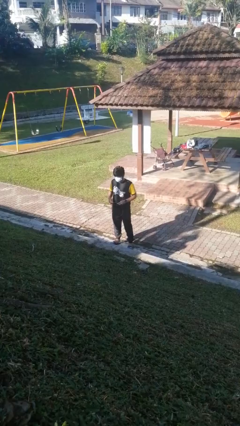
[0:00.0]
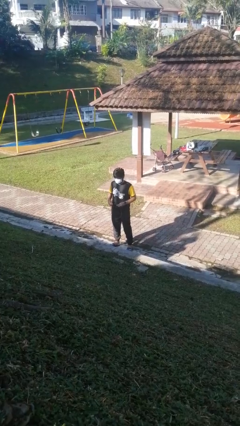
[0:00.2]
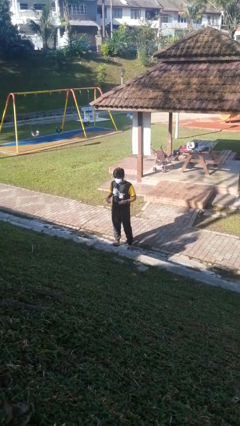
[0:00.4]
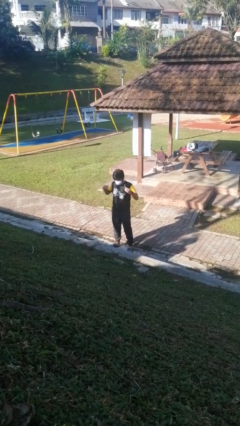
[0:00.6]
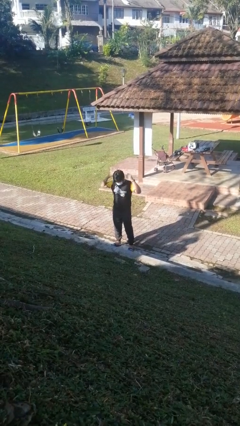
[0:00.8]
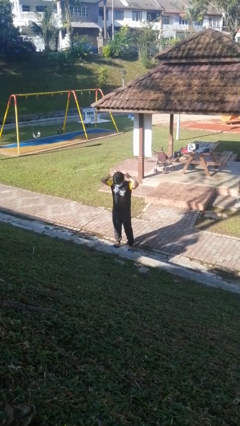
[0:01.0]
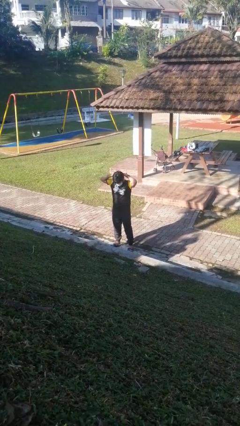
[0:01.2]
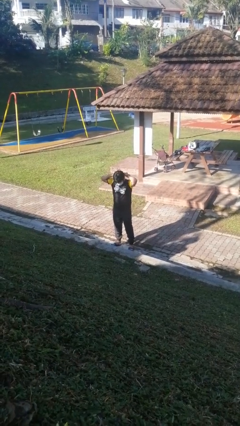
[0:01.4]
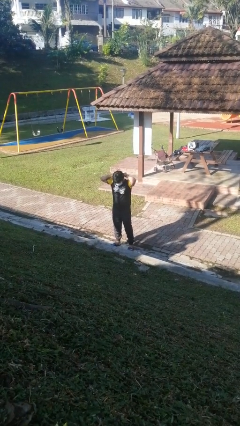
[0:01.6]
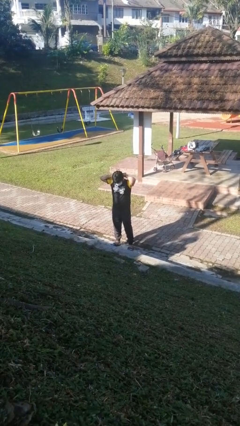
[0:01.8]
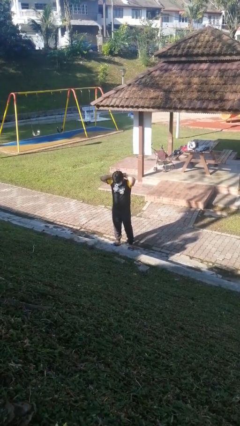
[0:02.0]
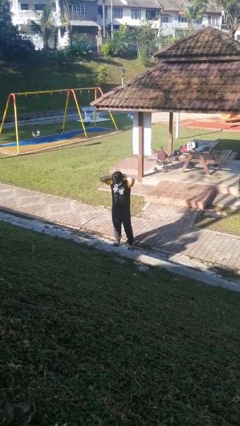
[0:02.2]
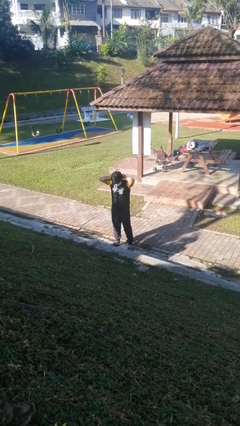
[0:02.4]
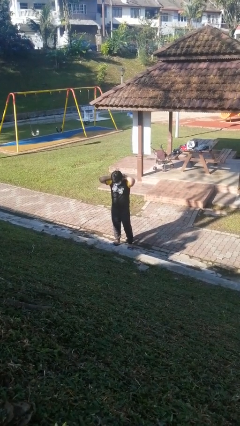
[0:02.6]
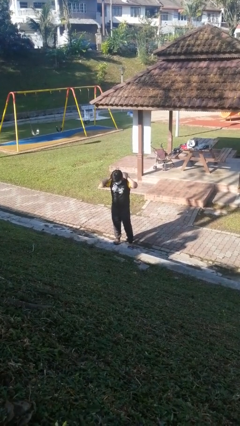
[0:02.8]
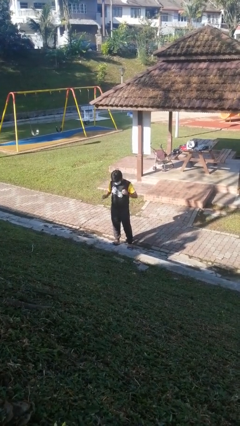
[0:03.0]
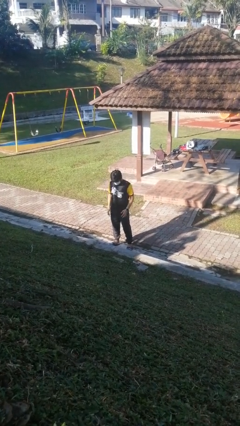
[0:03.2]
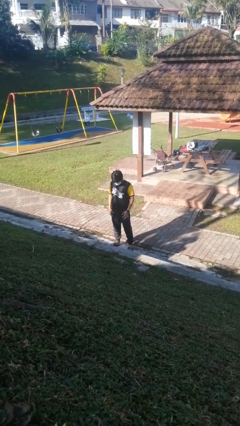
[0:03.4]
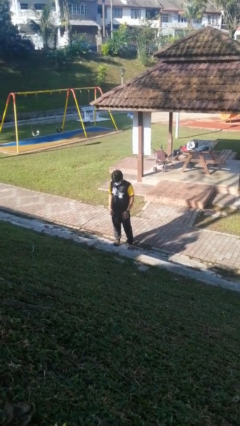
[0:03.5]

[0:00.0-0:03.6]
person puts on necklace

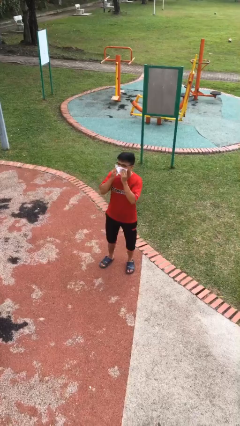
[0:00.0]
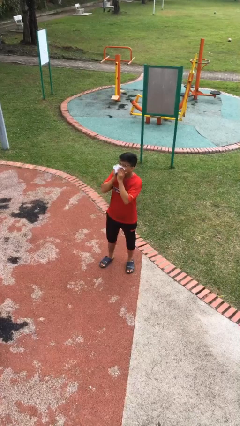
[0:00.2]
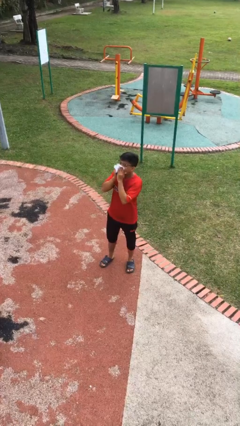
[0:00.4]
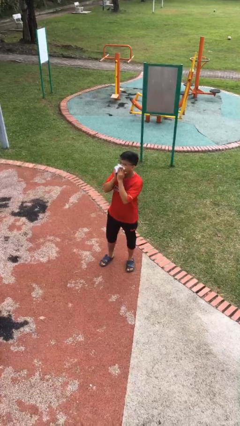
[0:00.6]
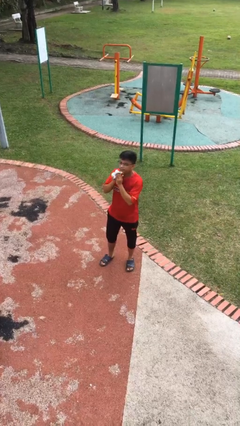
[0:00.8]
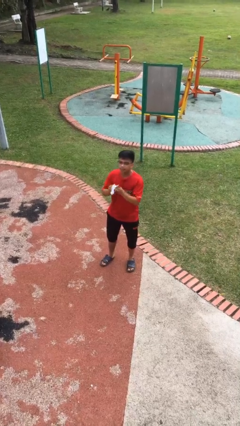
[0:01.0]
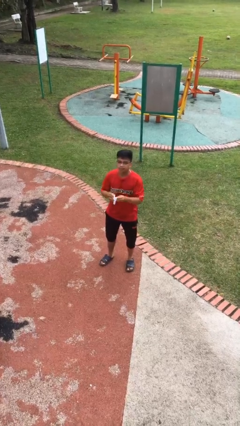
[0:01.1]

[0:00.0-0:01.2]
person blows nose

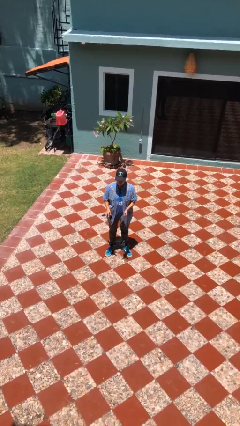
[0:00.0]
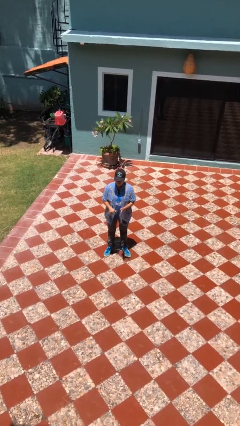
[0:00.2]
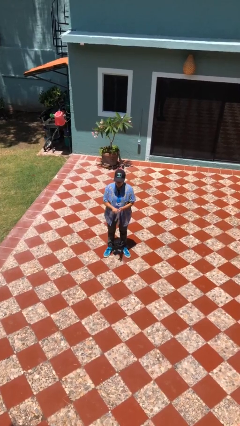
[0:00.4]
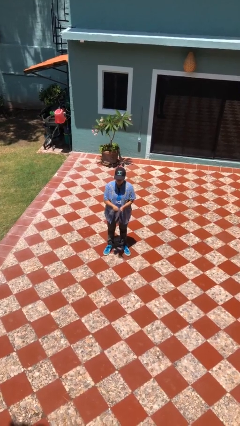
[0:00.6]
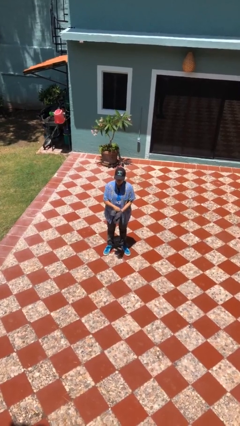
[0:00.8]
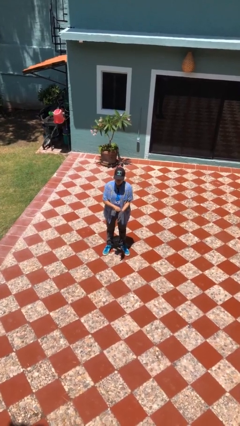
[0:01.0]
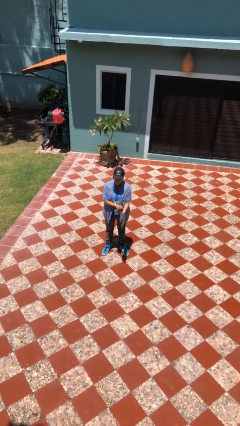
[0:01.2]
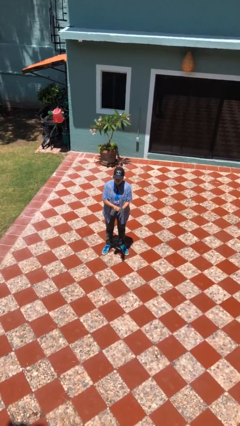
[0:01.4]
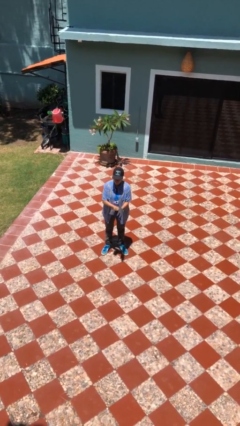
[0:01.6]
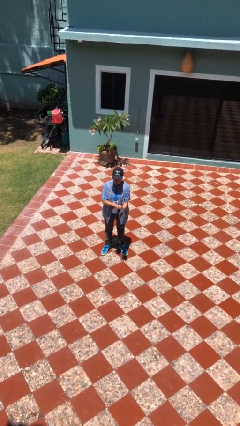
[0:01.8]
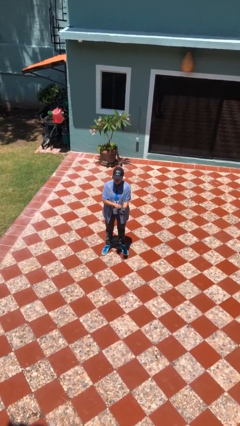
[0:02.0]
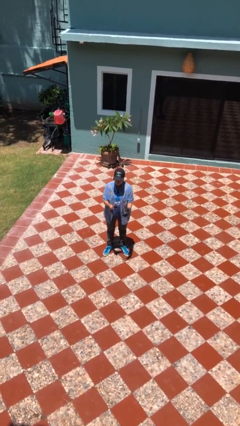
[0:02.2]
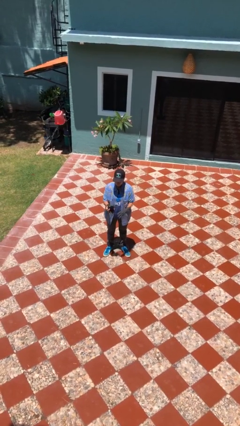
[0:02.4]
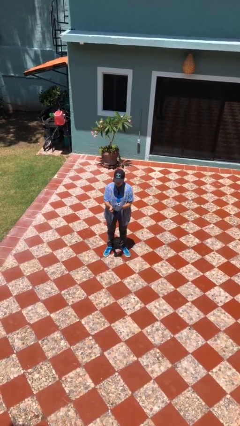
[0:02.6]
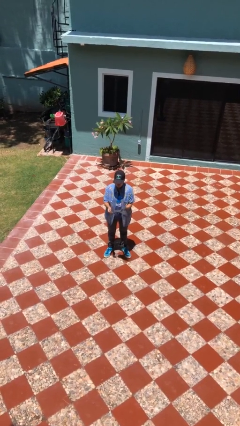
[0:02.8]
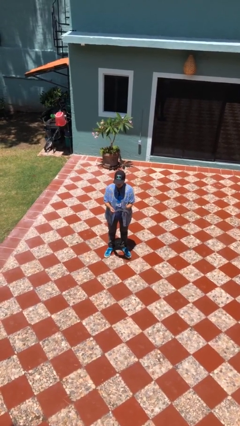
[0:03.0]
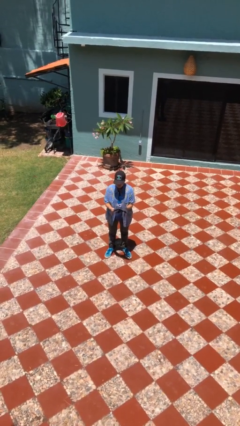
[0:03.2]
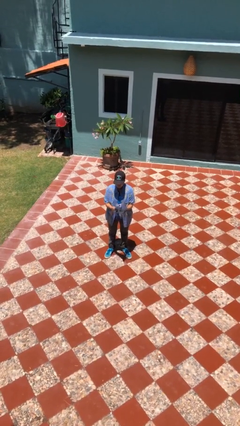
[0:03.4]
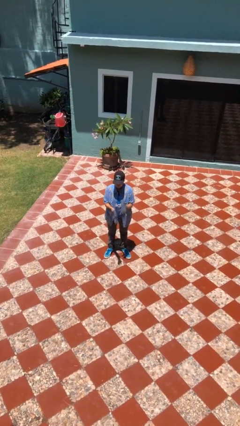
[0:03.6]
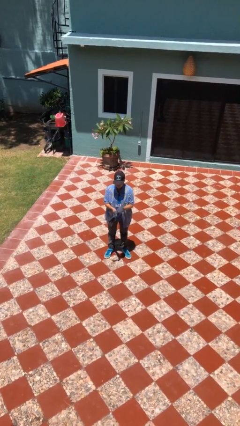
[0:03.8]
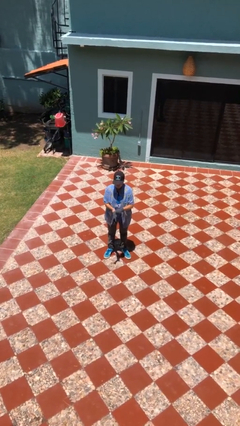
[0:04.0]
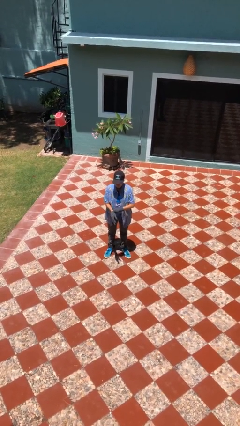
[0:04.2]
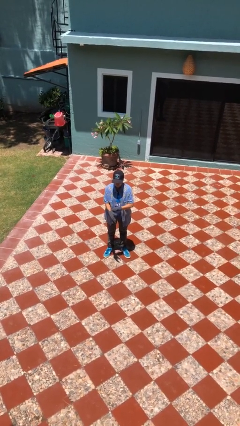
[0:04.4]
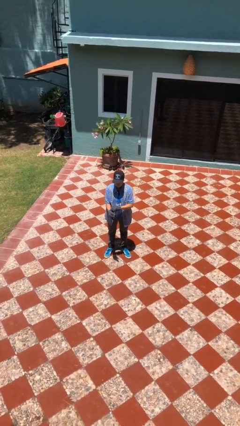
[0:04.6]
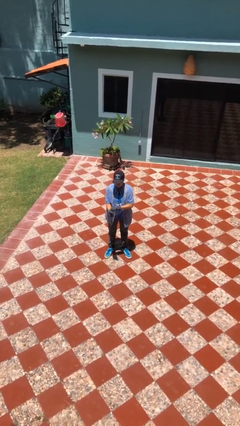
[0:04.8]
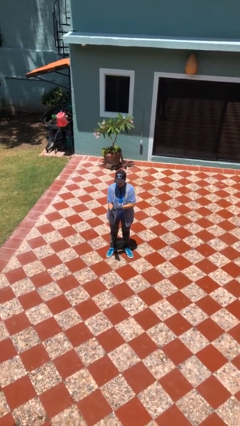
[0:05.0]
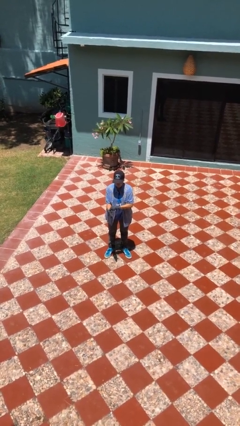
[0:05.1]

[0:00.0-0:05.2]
person puts on gloves

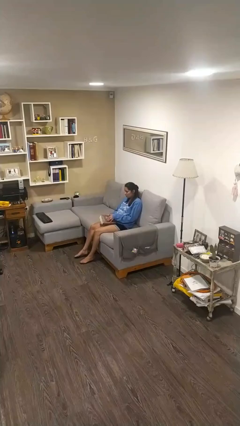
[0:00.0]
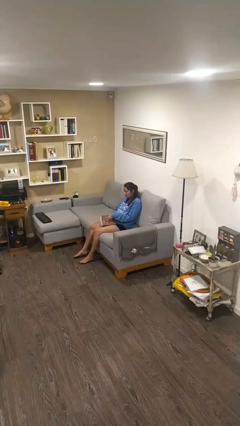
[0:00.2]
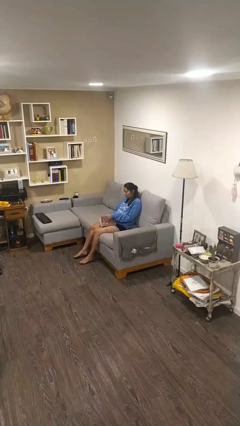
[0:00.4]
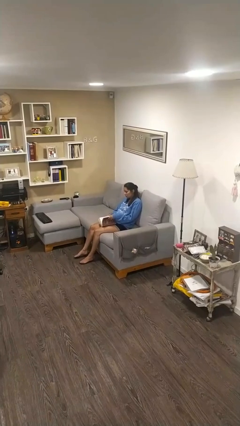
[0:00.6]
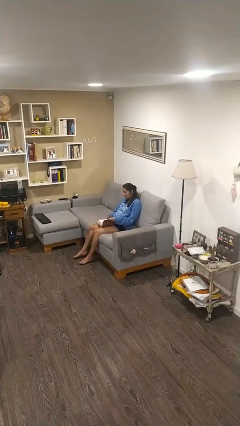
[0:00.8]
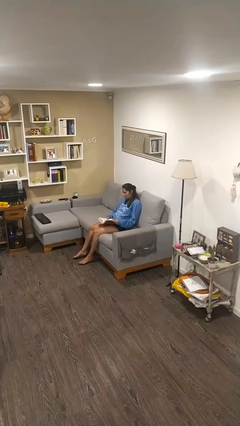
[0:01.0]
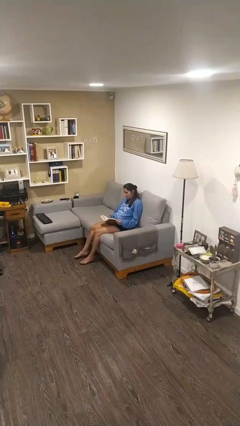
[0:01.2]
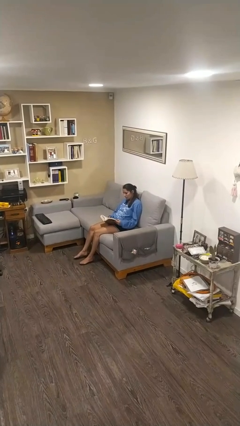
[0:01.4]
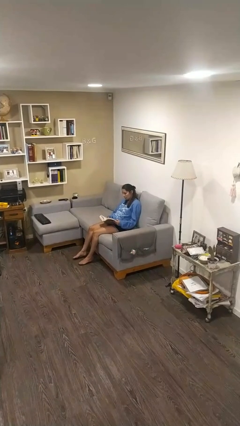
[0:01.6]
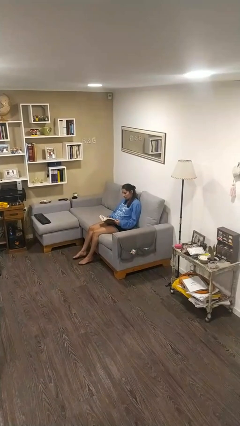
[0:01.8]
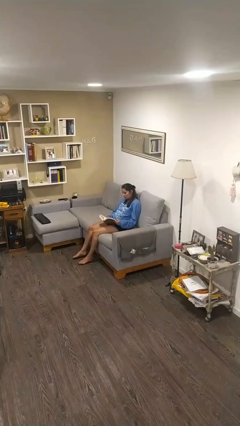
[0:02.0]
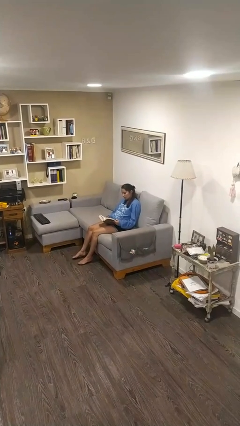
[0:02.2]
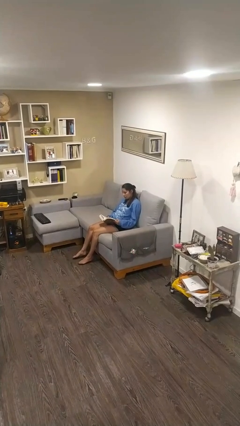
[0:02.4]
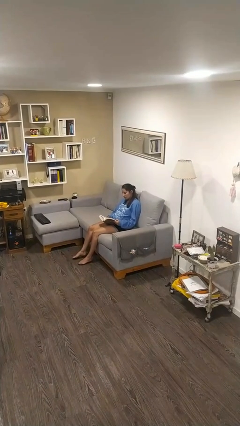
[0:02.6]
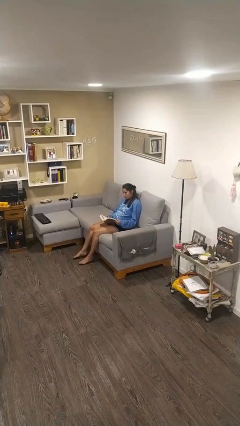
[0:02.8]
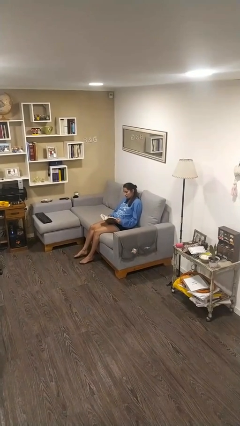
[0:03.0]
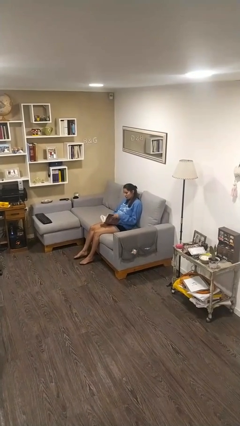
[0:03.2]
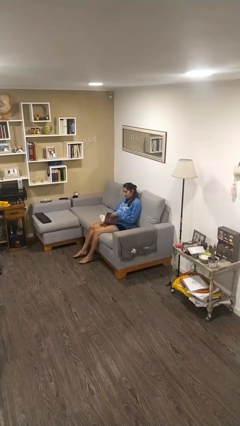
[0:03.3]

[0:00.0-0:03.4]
person reads document

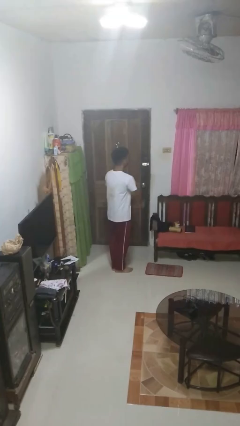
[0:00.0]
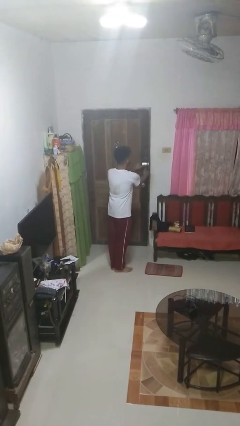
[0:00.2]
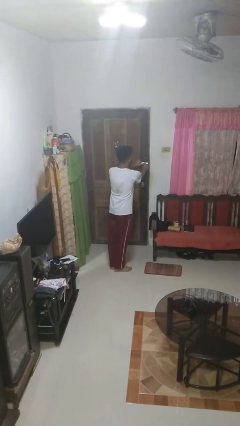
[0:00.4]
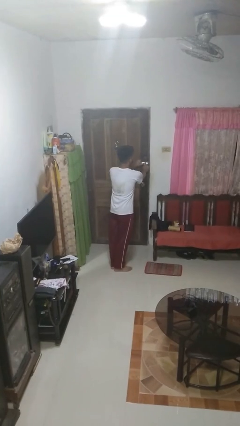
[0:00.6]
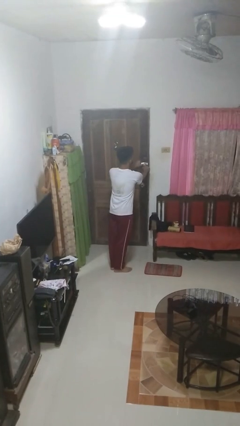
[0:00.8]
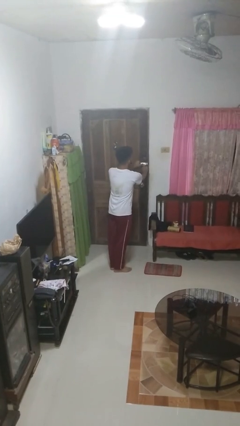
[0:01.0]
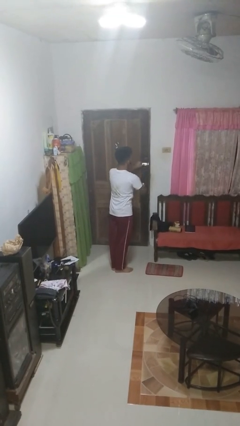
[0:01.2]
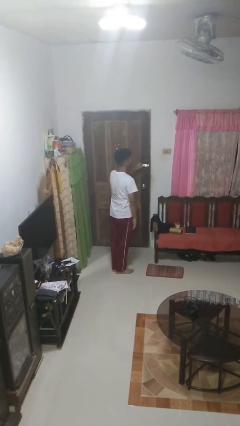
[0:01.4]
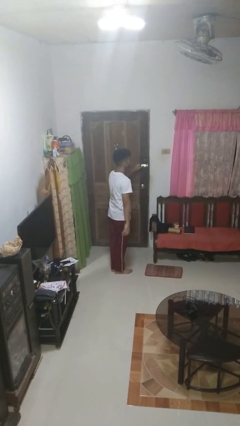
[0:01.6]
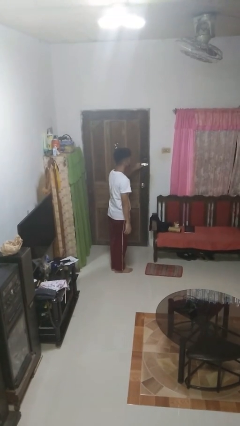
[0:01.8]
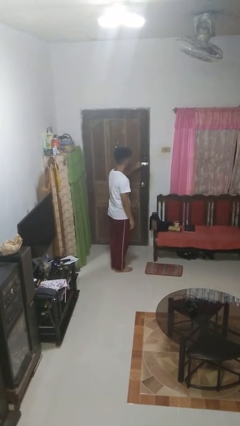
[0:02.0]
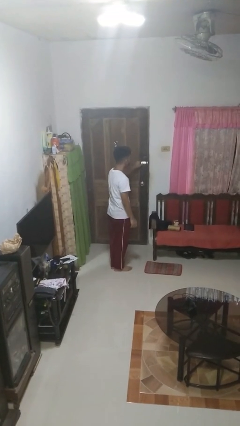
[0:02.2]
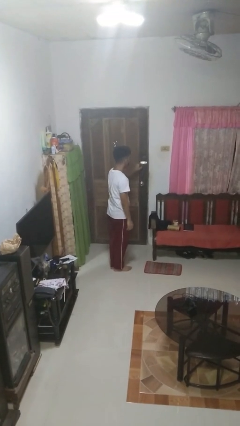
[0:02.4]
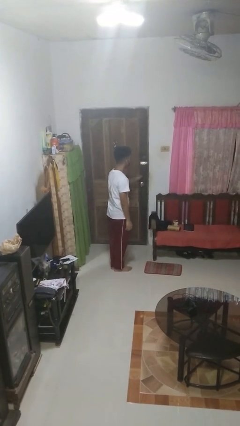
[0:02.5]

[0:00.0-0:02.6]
person unlocks door with keys

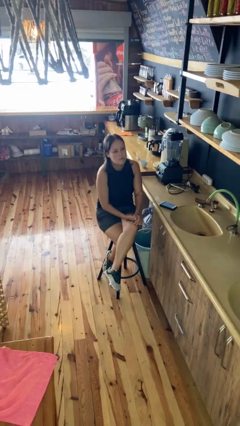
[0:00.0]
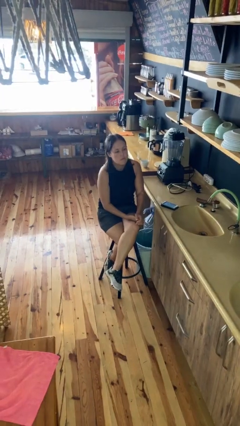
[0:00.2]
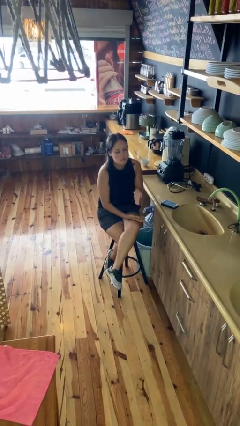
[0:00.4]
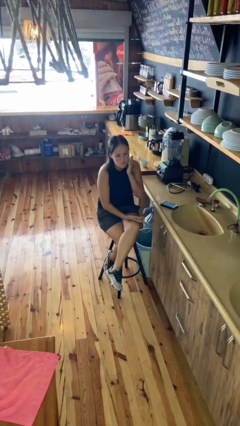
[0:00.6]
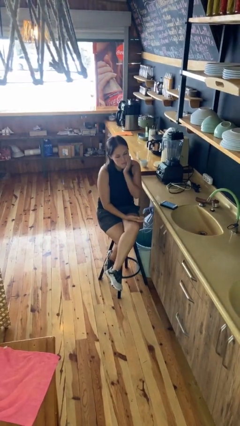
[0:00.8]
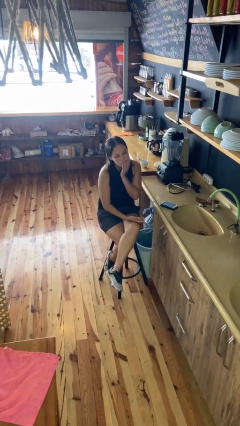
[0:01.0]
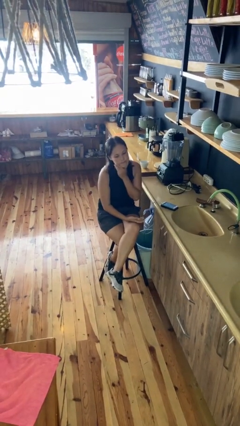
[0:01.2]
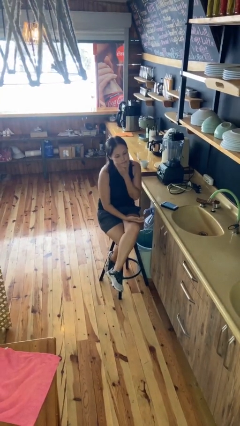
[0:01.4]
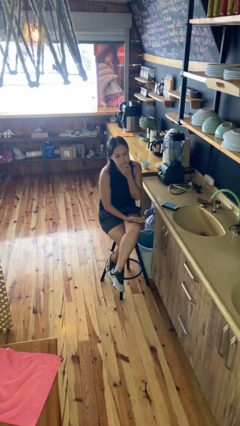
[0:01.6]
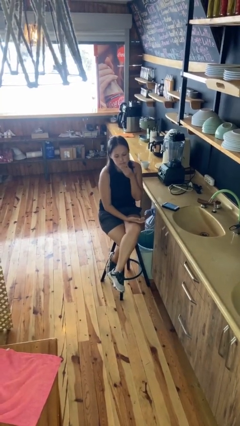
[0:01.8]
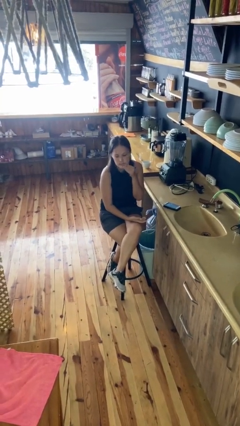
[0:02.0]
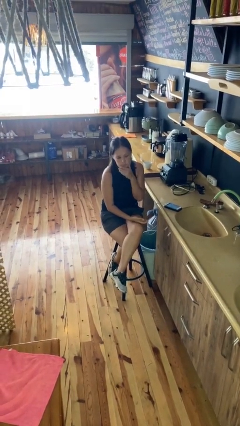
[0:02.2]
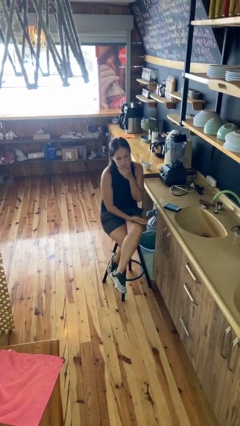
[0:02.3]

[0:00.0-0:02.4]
person strokes chin
